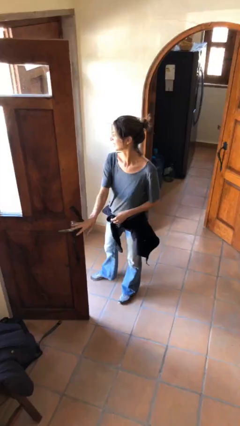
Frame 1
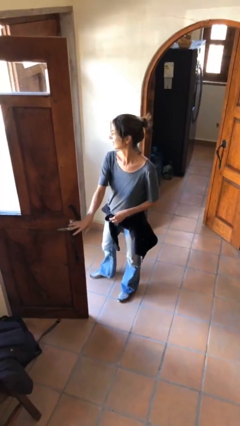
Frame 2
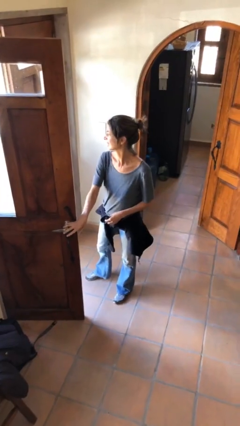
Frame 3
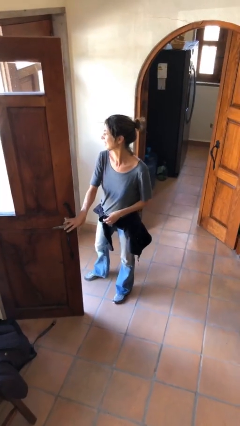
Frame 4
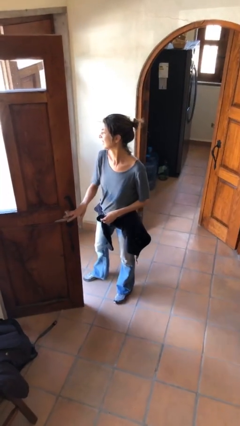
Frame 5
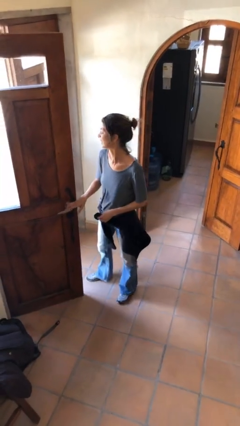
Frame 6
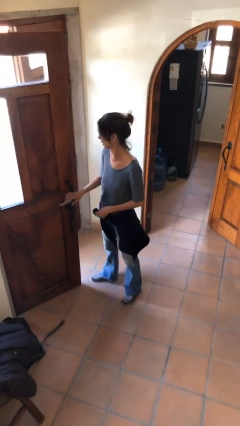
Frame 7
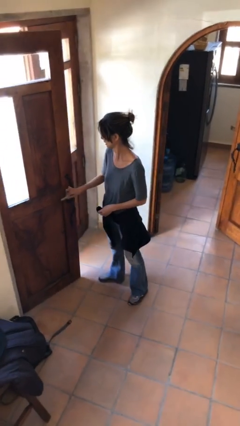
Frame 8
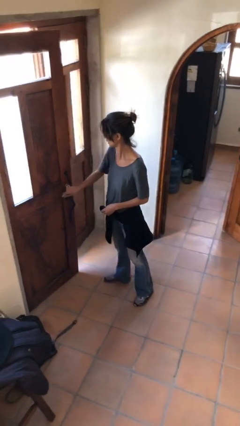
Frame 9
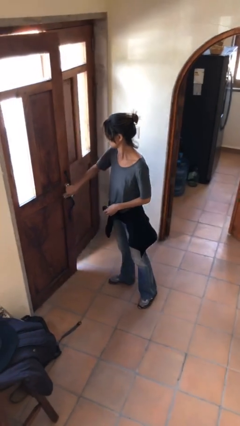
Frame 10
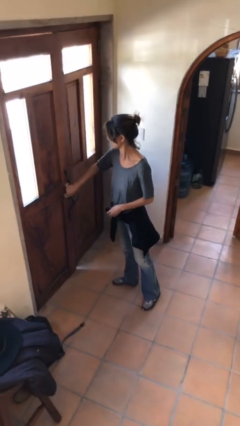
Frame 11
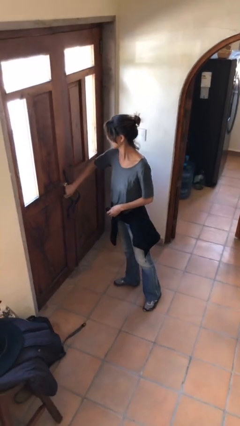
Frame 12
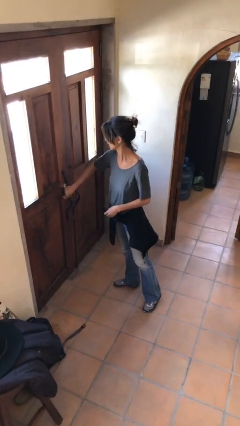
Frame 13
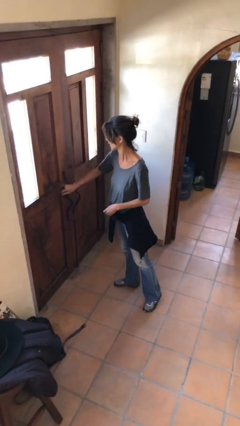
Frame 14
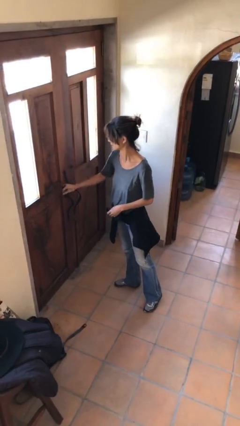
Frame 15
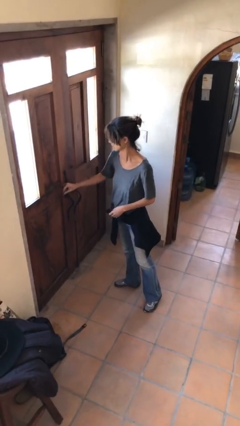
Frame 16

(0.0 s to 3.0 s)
person closes facility door

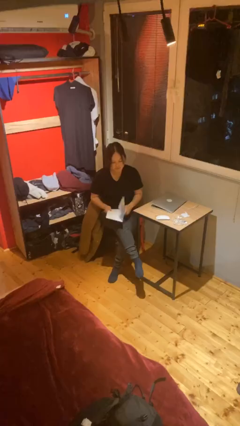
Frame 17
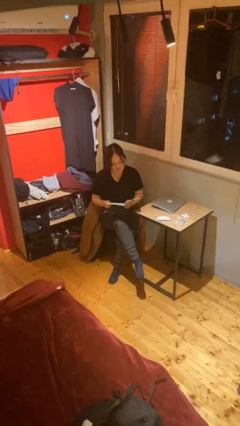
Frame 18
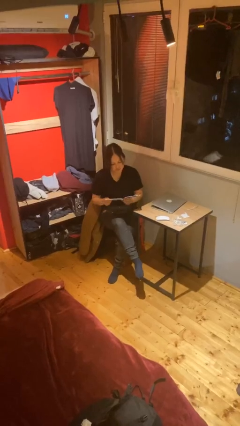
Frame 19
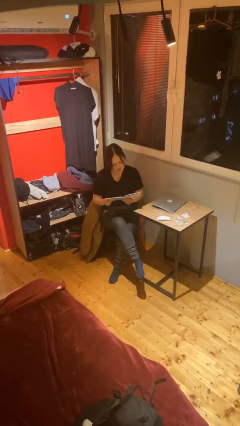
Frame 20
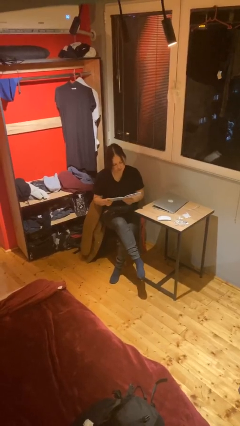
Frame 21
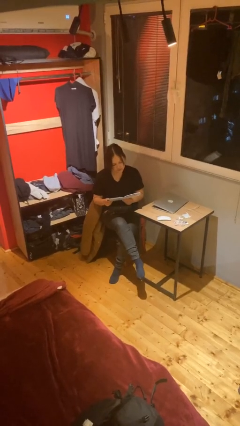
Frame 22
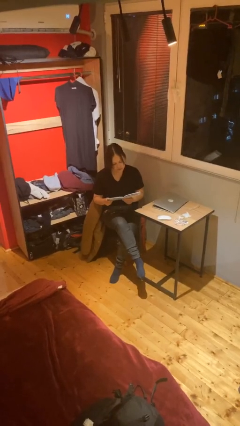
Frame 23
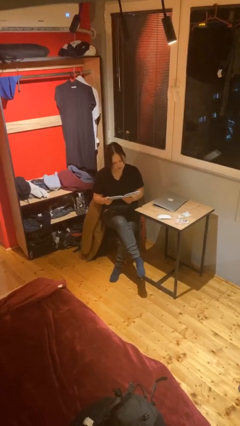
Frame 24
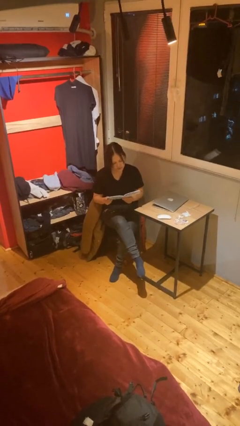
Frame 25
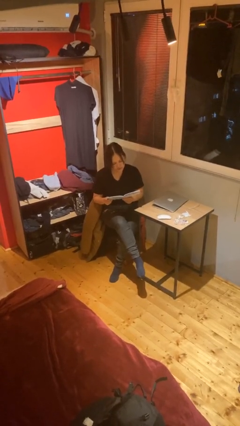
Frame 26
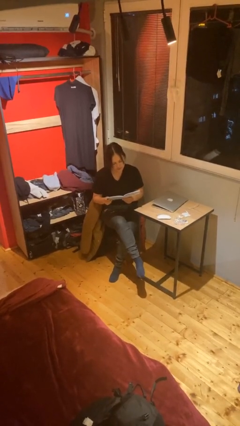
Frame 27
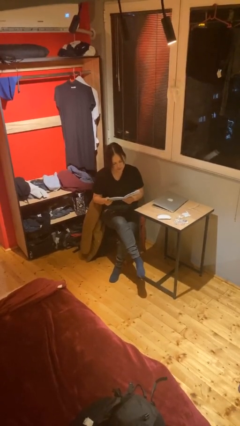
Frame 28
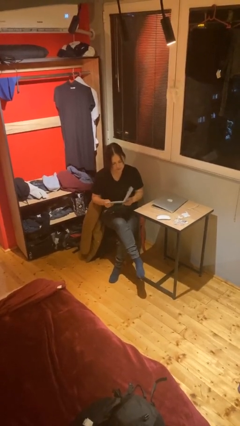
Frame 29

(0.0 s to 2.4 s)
person reads document

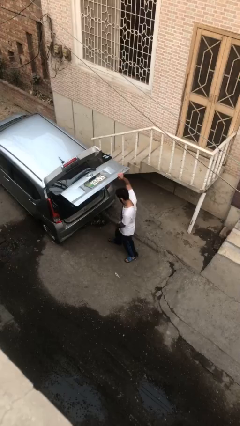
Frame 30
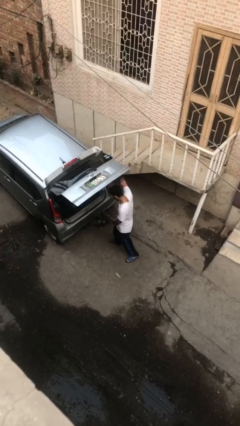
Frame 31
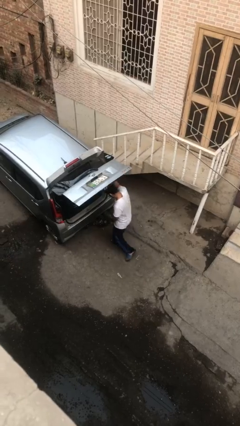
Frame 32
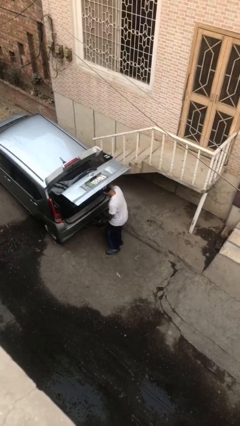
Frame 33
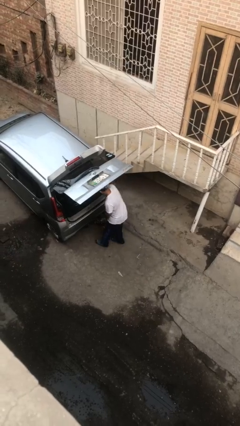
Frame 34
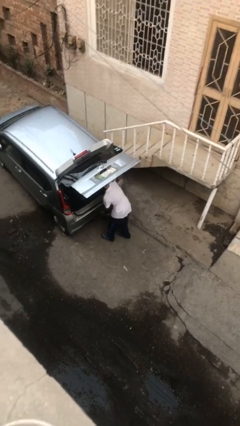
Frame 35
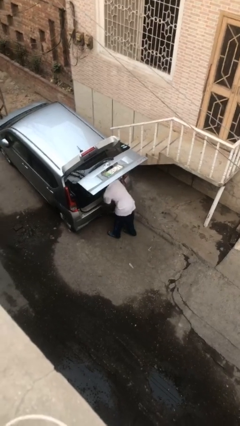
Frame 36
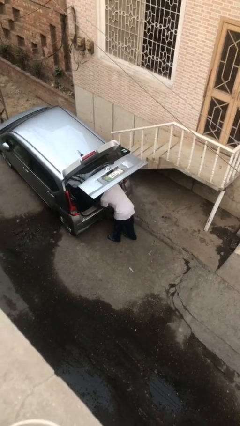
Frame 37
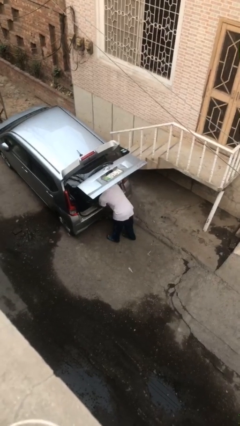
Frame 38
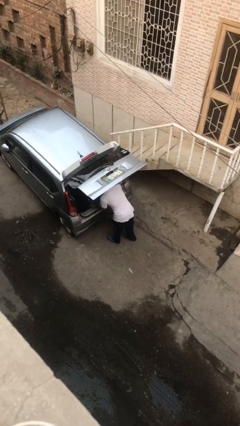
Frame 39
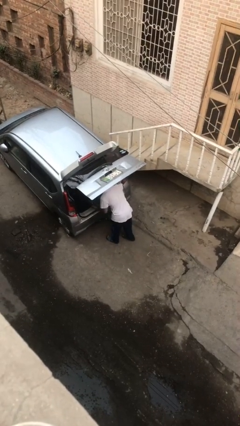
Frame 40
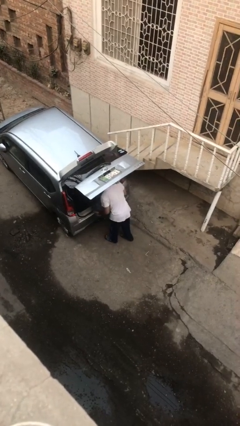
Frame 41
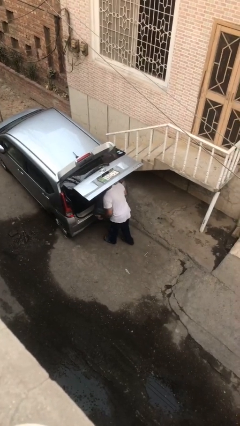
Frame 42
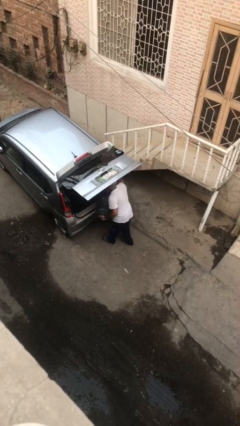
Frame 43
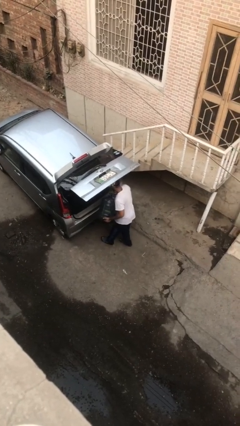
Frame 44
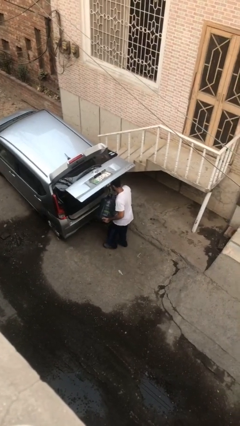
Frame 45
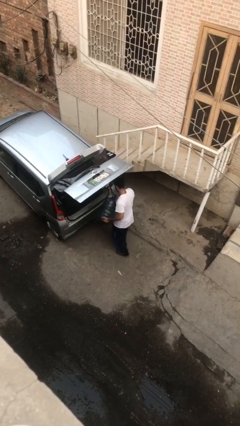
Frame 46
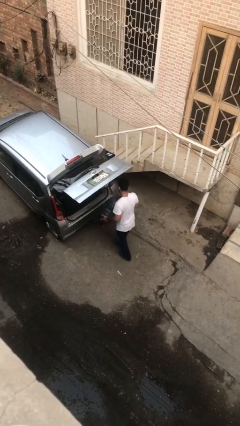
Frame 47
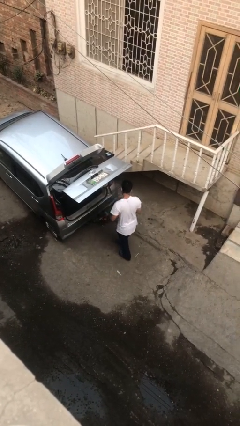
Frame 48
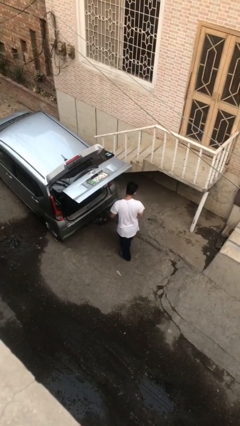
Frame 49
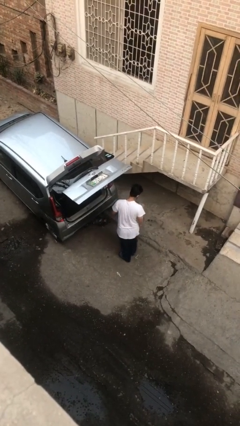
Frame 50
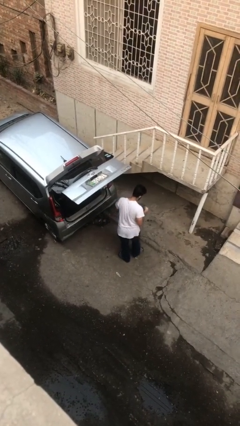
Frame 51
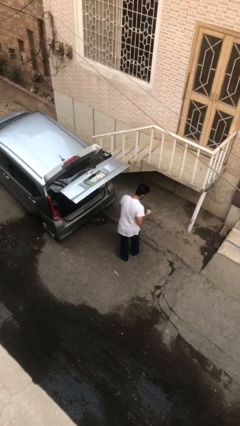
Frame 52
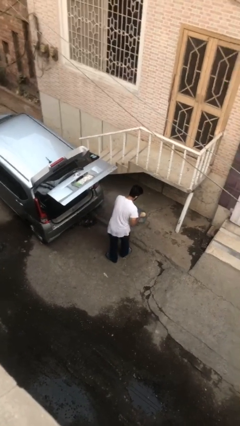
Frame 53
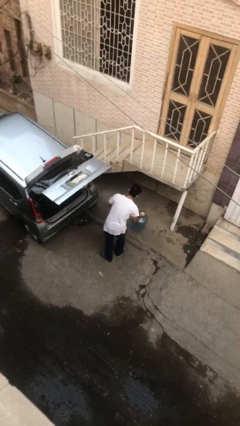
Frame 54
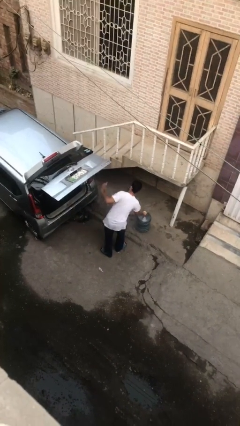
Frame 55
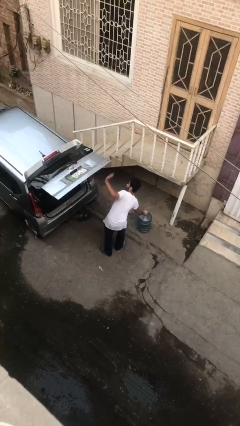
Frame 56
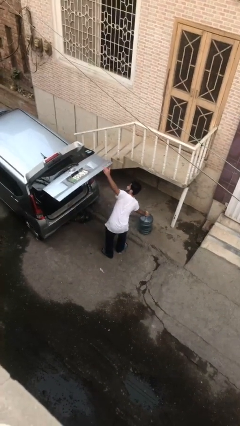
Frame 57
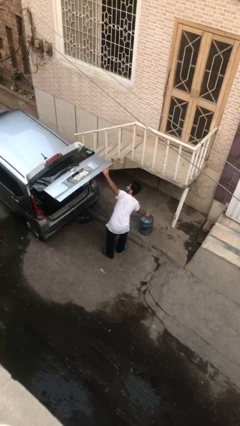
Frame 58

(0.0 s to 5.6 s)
person unloads car

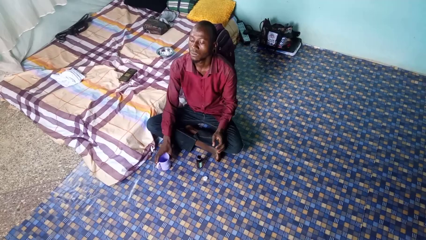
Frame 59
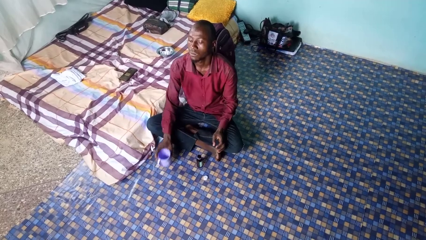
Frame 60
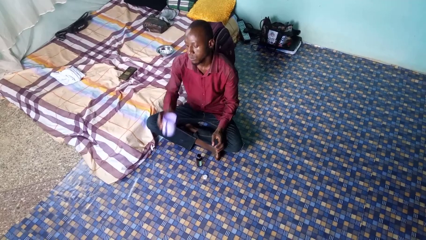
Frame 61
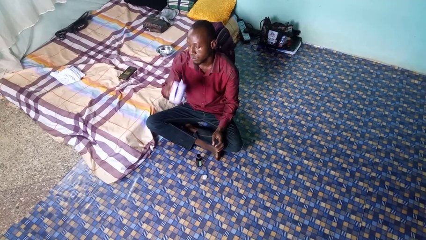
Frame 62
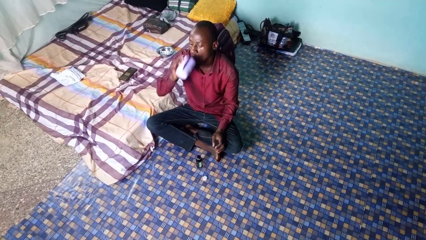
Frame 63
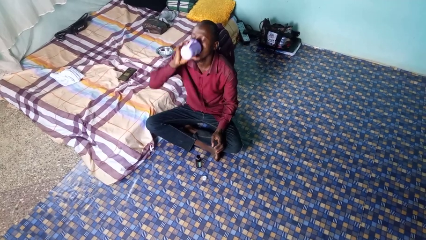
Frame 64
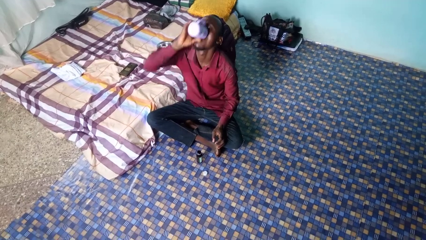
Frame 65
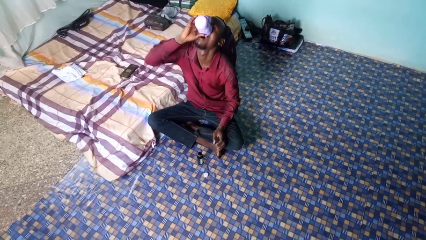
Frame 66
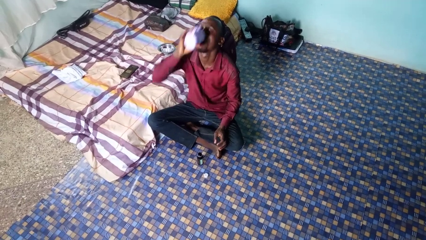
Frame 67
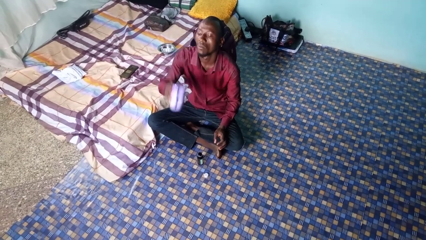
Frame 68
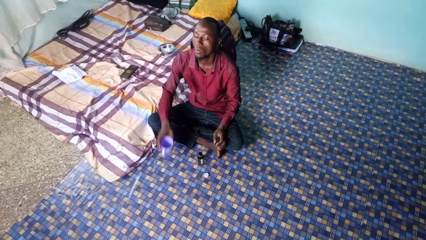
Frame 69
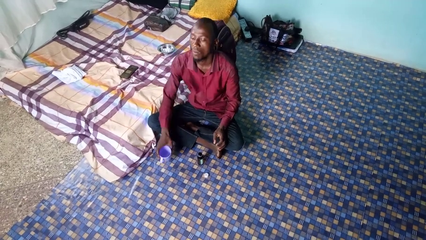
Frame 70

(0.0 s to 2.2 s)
person drinks from cup

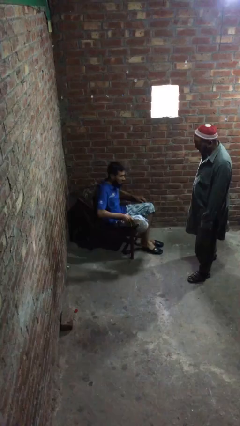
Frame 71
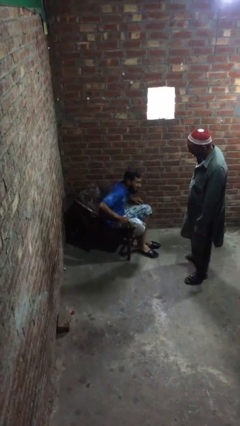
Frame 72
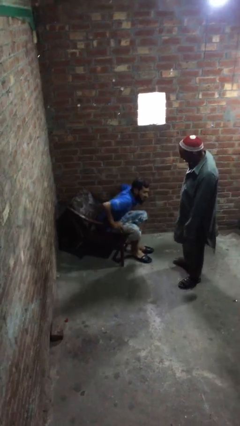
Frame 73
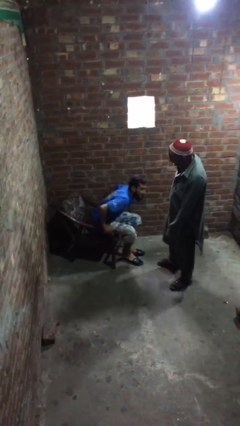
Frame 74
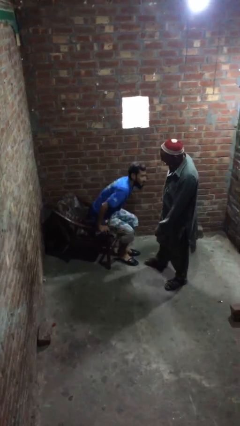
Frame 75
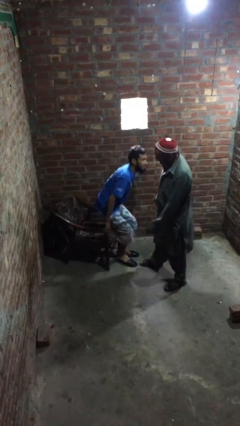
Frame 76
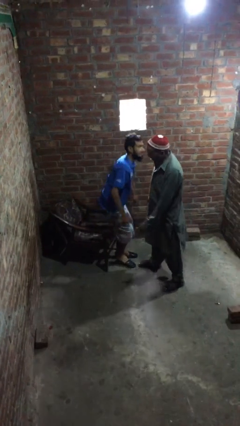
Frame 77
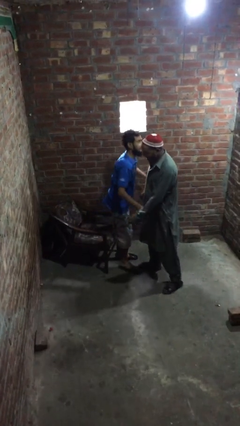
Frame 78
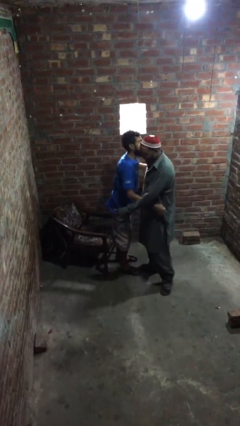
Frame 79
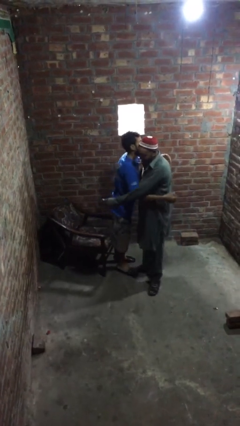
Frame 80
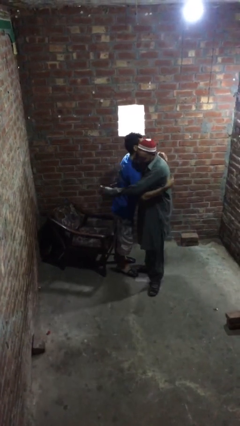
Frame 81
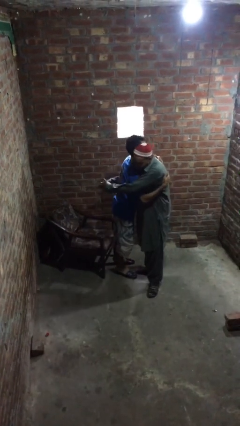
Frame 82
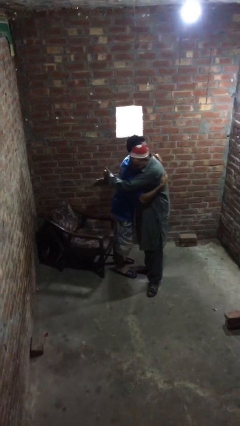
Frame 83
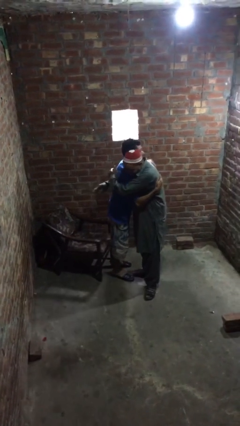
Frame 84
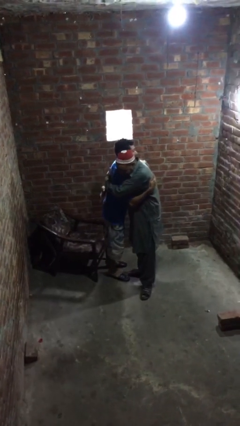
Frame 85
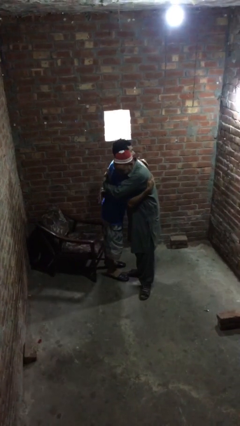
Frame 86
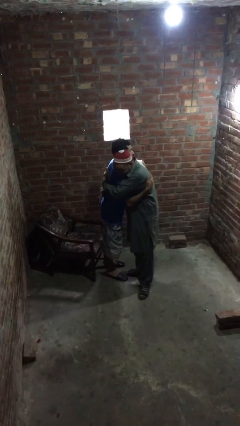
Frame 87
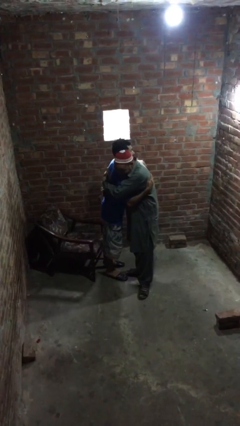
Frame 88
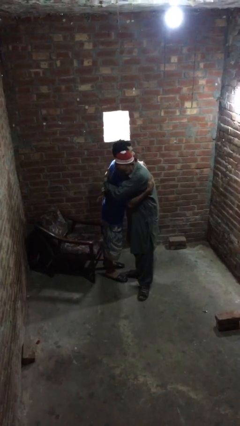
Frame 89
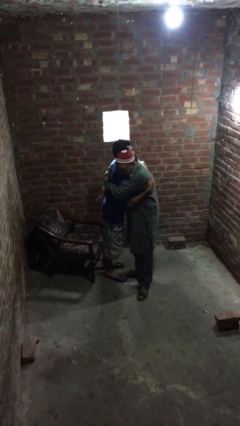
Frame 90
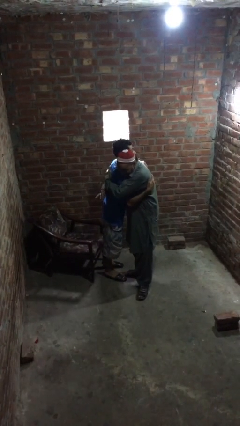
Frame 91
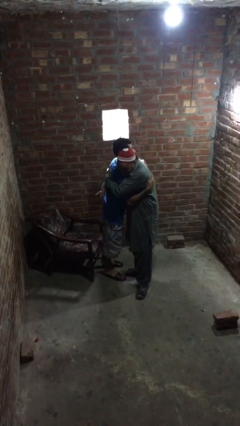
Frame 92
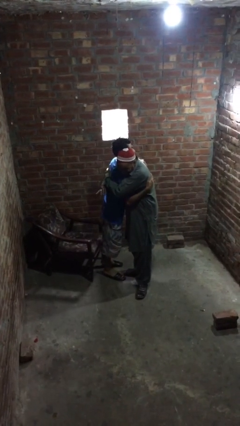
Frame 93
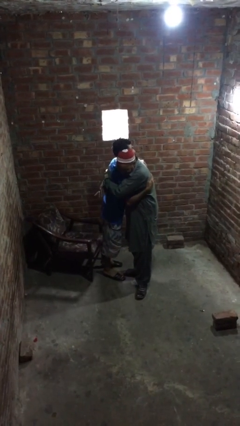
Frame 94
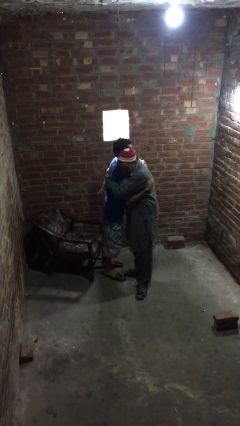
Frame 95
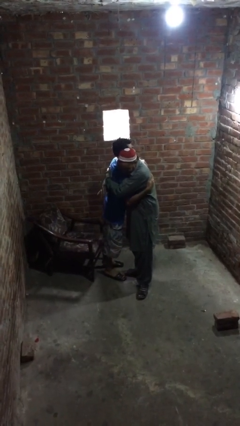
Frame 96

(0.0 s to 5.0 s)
person embraces person
